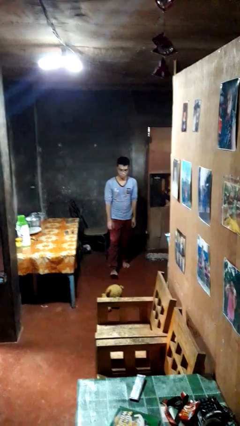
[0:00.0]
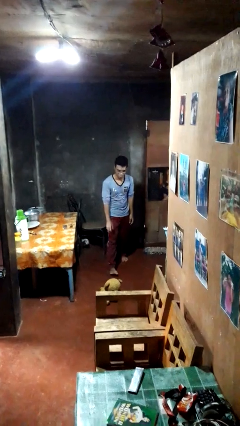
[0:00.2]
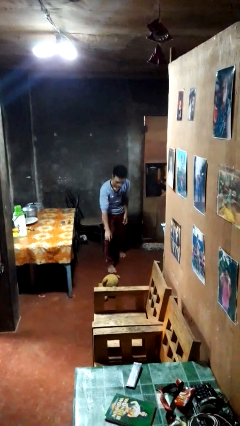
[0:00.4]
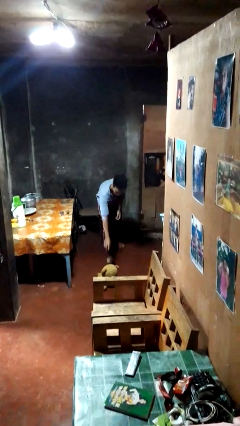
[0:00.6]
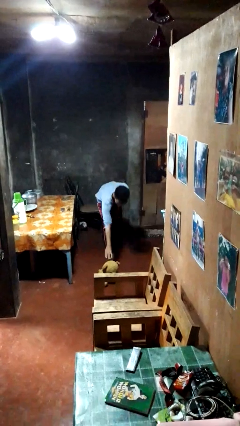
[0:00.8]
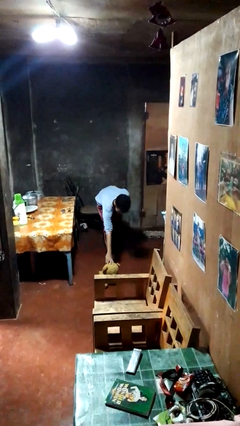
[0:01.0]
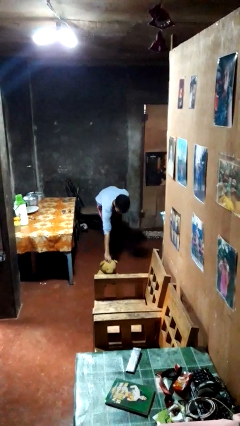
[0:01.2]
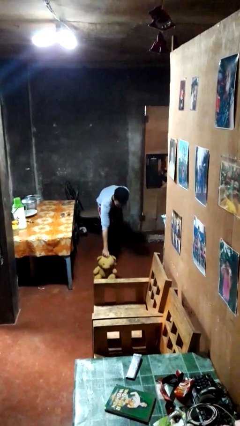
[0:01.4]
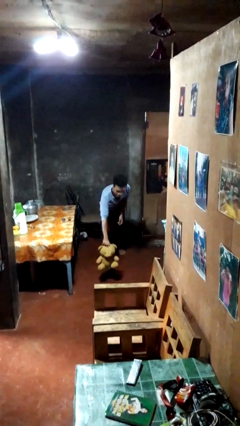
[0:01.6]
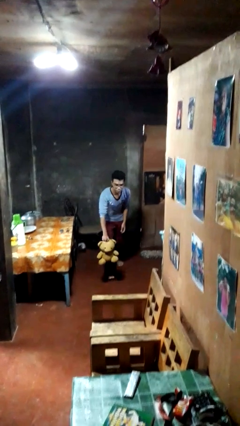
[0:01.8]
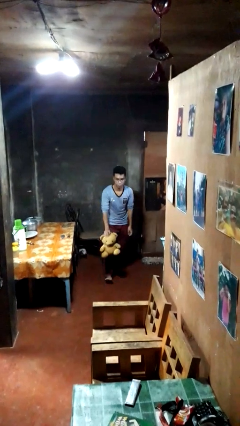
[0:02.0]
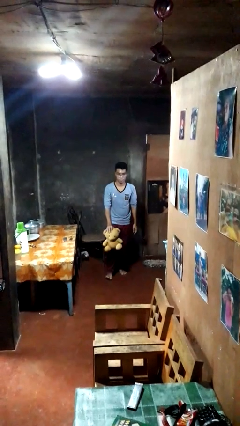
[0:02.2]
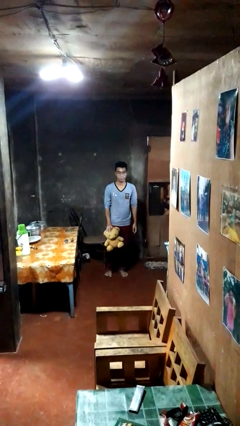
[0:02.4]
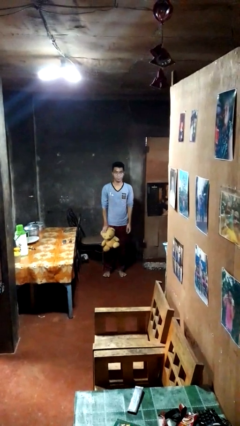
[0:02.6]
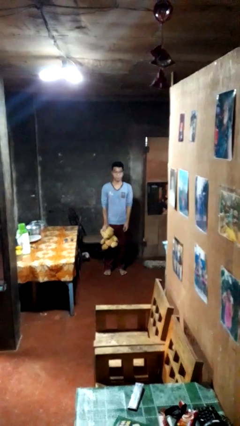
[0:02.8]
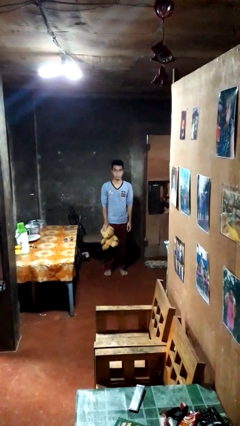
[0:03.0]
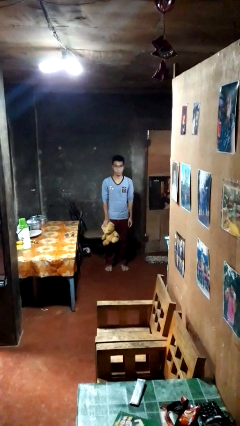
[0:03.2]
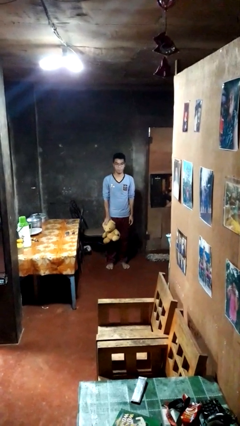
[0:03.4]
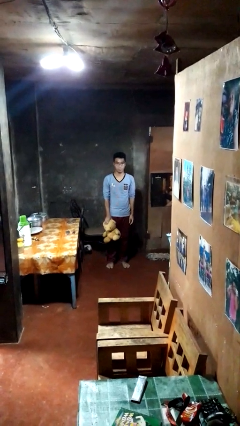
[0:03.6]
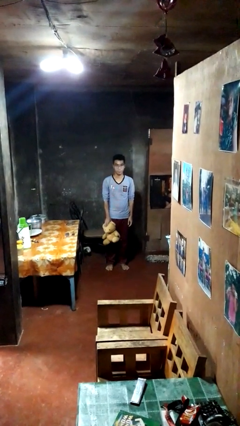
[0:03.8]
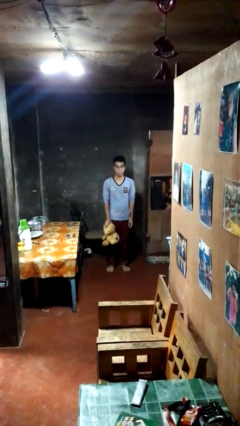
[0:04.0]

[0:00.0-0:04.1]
person picks up object from floor

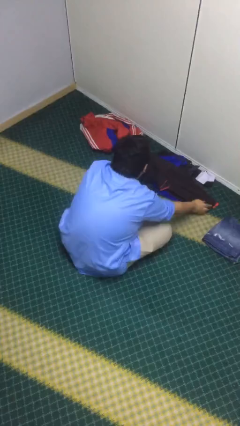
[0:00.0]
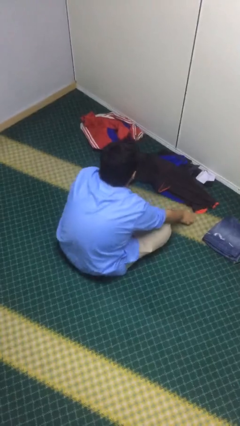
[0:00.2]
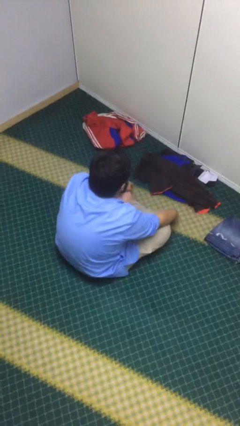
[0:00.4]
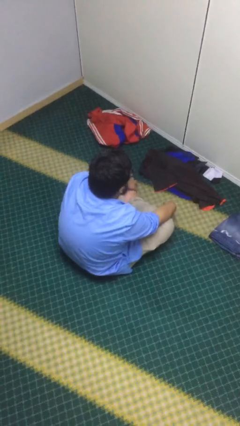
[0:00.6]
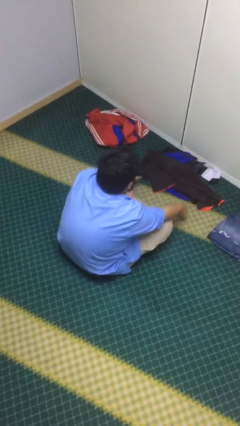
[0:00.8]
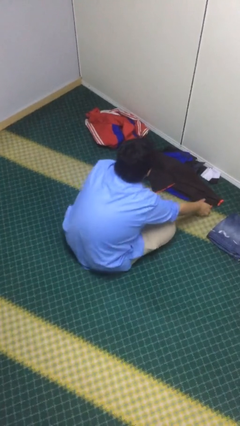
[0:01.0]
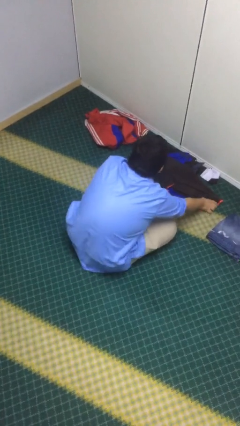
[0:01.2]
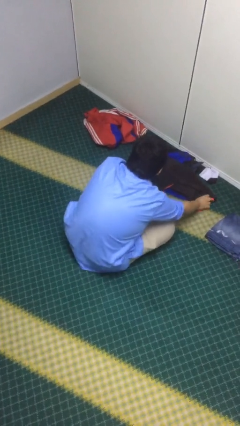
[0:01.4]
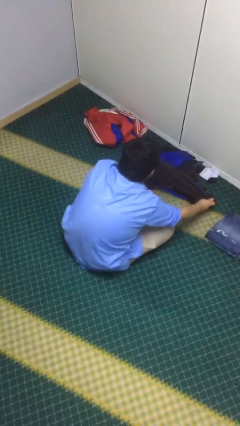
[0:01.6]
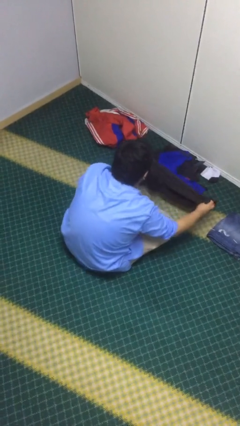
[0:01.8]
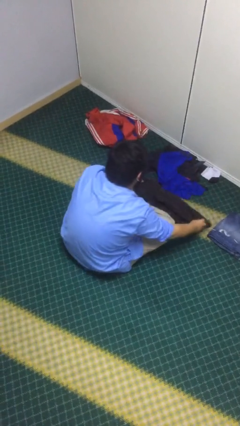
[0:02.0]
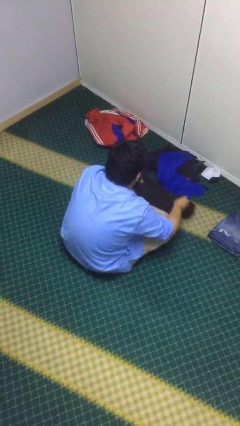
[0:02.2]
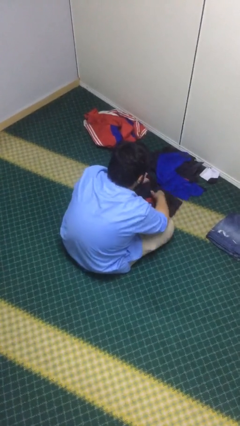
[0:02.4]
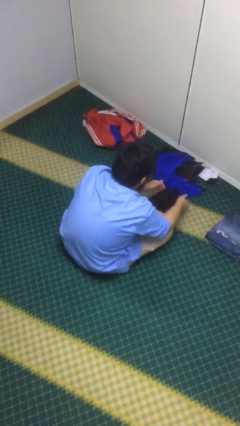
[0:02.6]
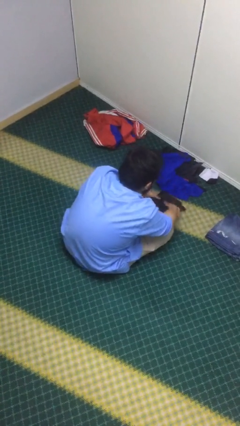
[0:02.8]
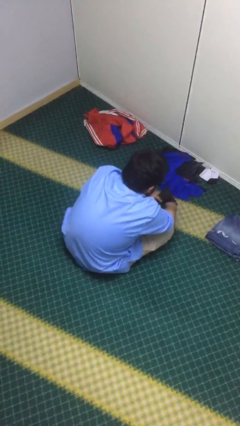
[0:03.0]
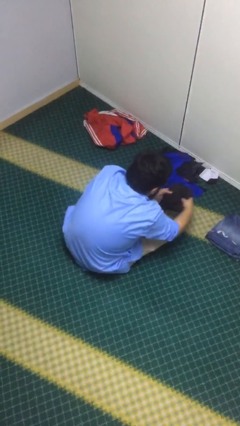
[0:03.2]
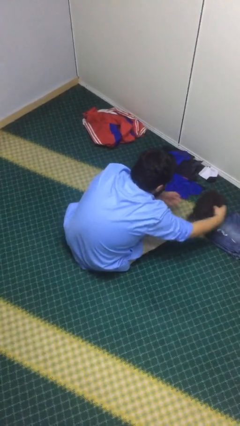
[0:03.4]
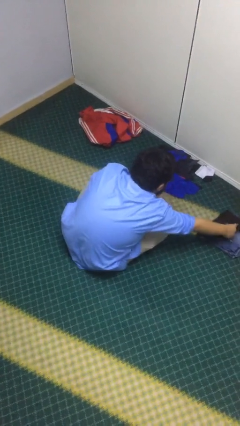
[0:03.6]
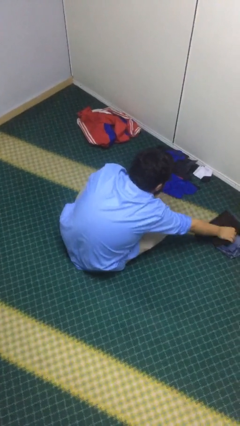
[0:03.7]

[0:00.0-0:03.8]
person folds shirt

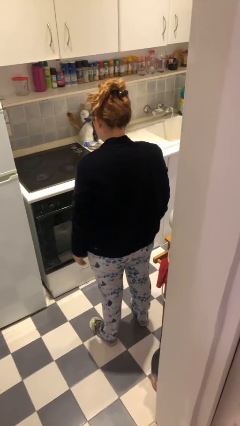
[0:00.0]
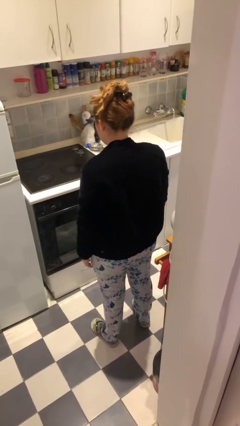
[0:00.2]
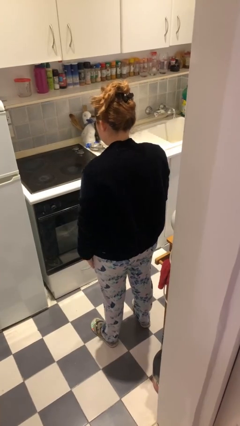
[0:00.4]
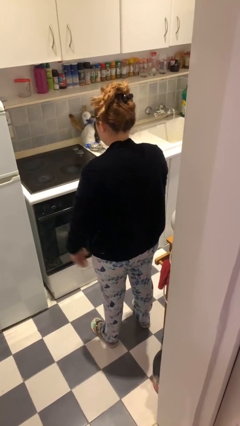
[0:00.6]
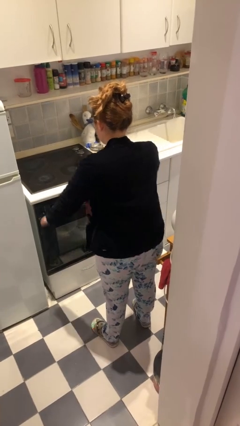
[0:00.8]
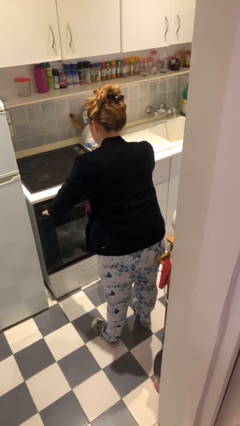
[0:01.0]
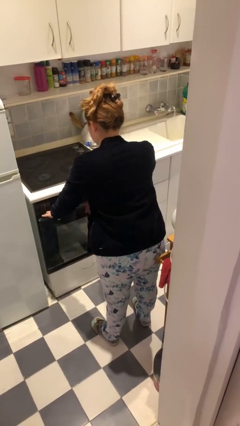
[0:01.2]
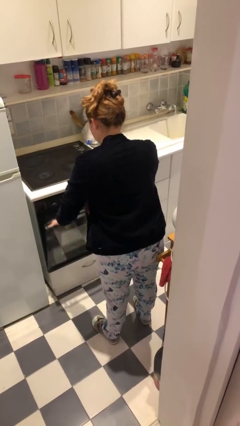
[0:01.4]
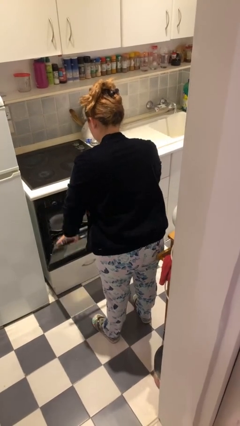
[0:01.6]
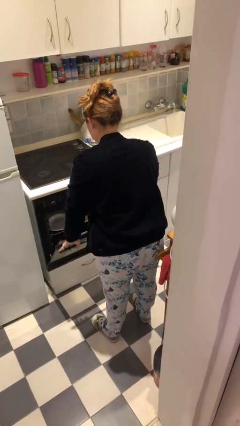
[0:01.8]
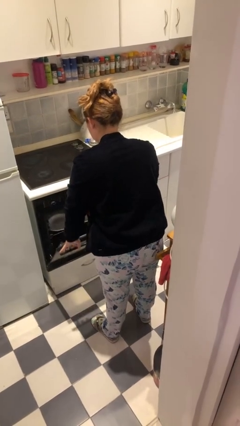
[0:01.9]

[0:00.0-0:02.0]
person opens dishwasher

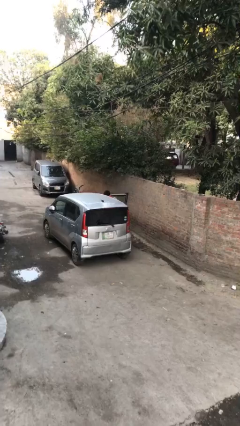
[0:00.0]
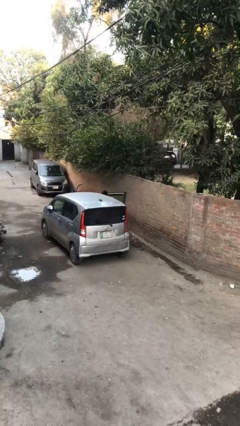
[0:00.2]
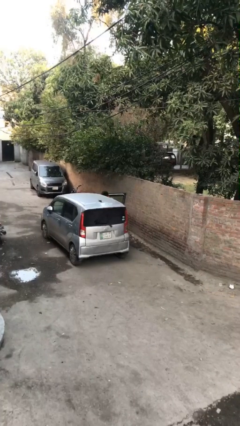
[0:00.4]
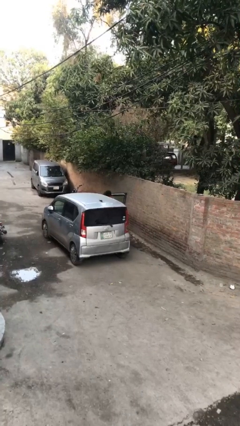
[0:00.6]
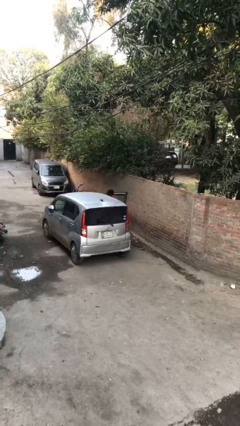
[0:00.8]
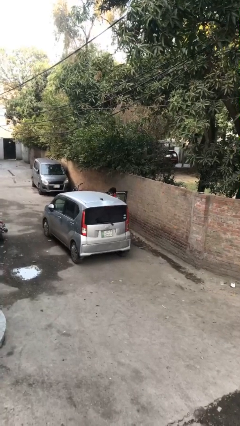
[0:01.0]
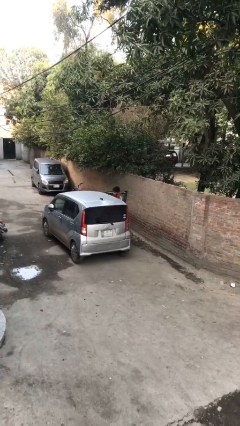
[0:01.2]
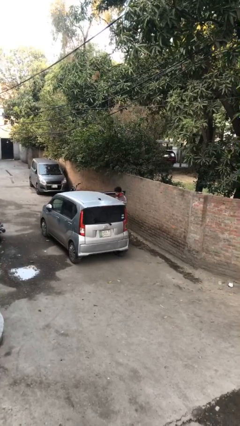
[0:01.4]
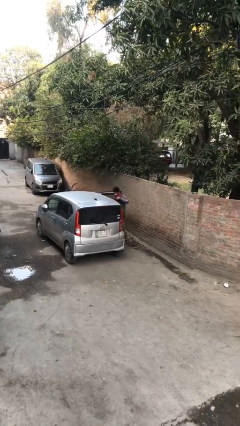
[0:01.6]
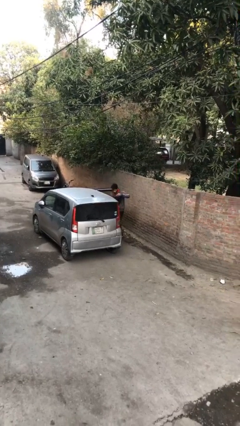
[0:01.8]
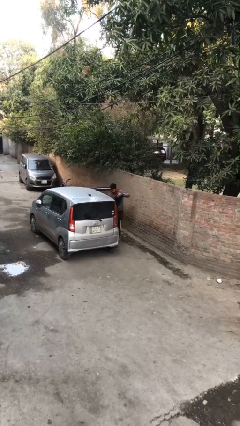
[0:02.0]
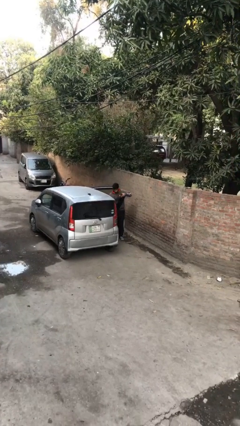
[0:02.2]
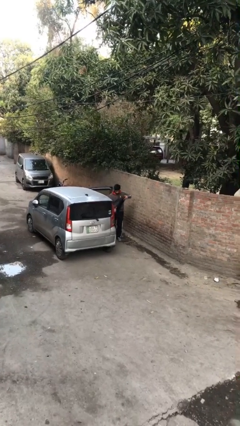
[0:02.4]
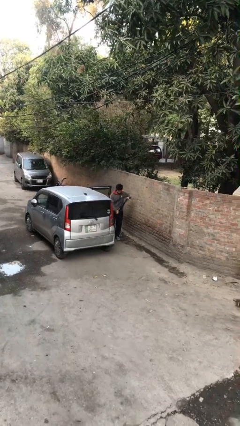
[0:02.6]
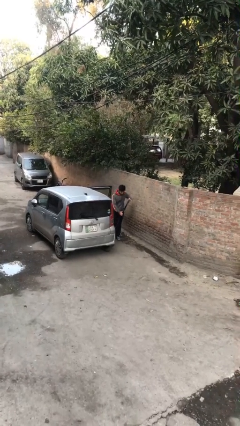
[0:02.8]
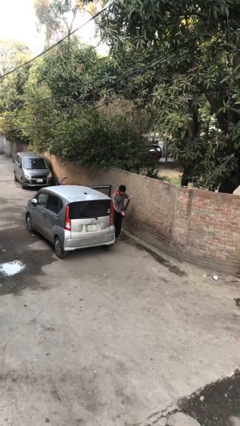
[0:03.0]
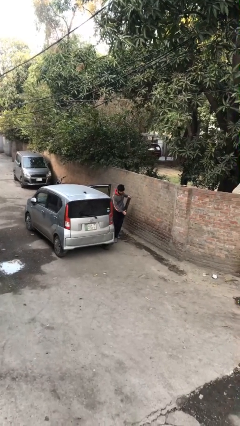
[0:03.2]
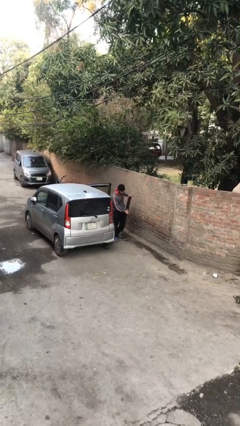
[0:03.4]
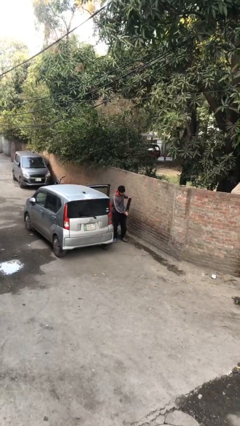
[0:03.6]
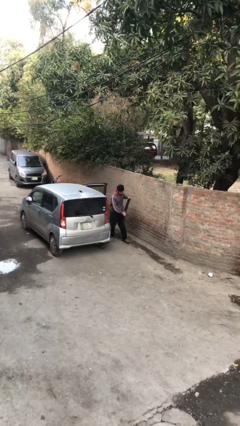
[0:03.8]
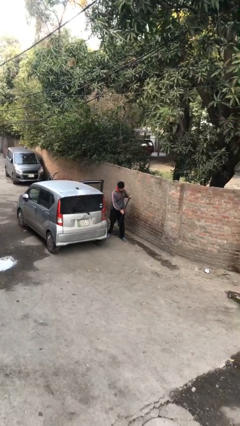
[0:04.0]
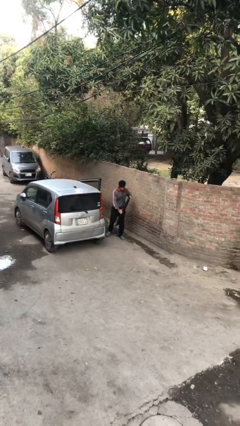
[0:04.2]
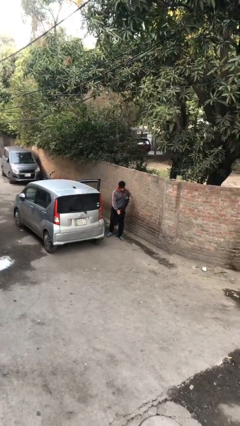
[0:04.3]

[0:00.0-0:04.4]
person unloads car

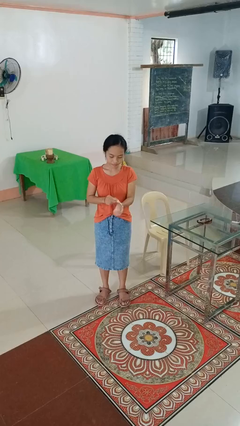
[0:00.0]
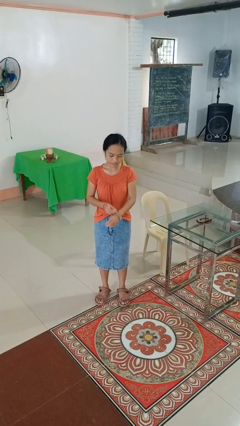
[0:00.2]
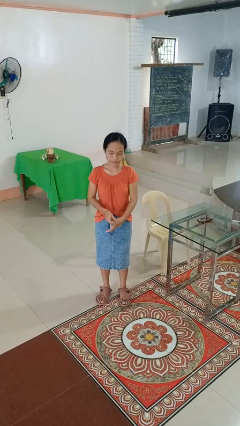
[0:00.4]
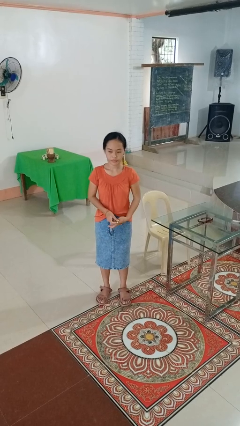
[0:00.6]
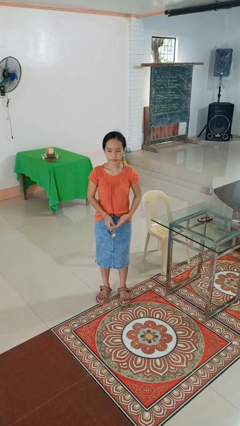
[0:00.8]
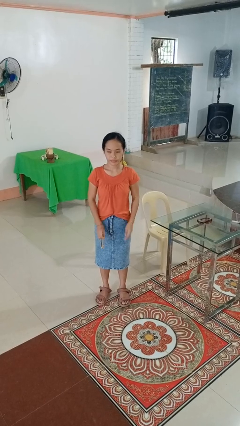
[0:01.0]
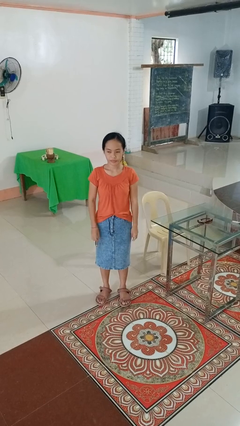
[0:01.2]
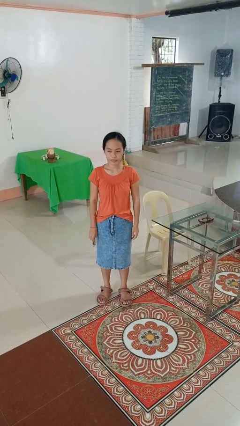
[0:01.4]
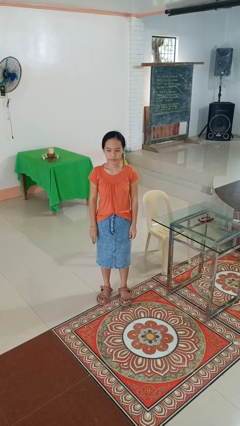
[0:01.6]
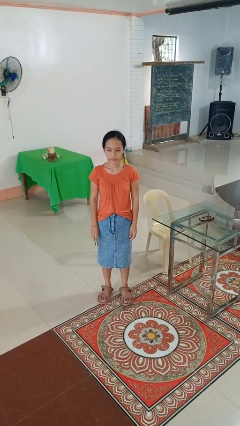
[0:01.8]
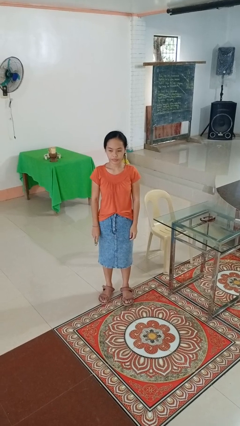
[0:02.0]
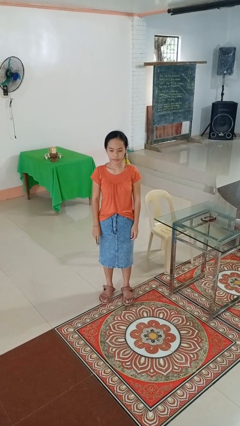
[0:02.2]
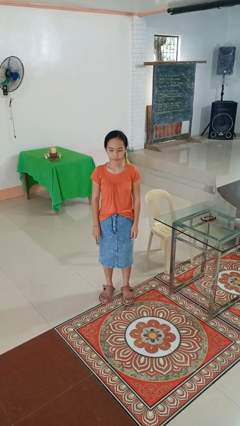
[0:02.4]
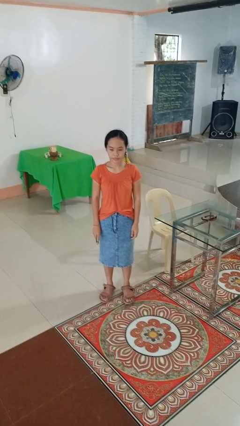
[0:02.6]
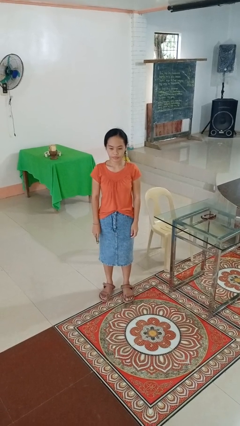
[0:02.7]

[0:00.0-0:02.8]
person takes off wristwatch

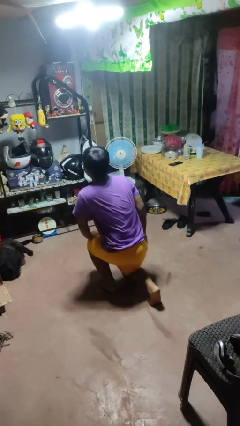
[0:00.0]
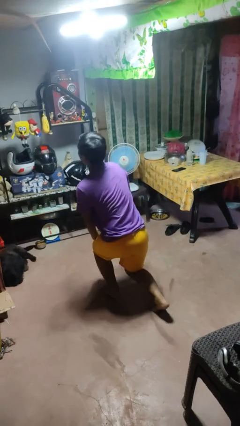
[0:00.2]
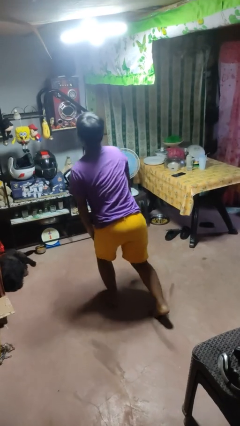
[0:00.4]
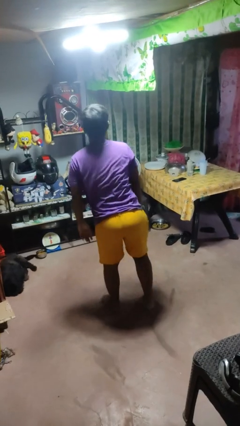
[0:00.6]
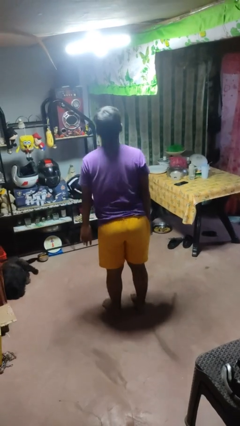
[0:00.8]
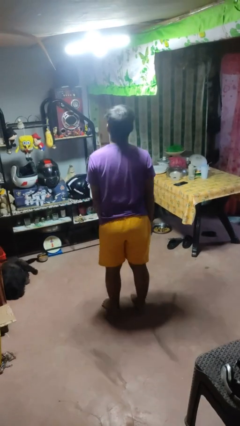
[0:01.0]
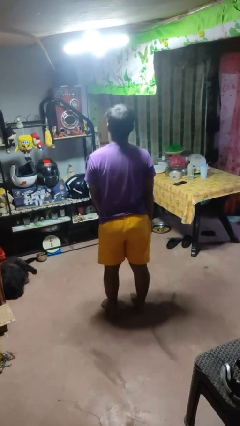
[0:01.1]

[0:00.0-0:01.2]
person stands up from floor
